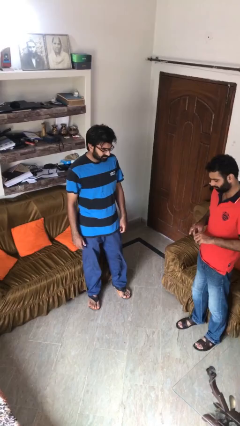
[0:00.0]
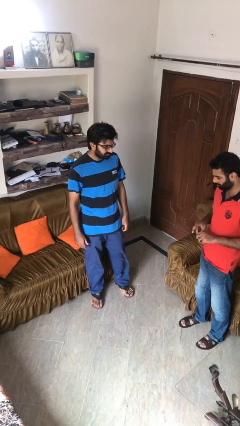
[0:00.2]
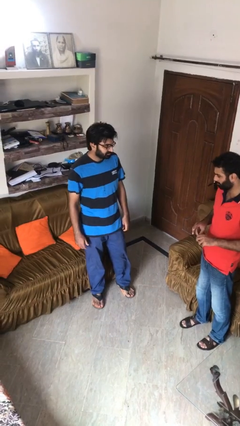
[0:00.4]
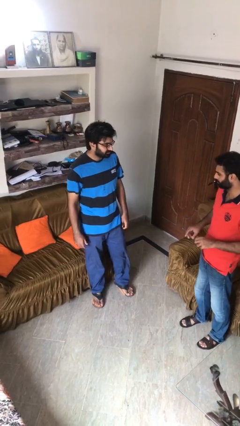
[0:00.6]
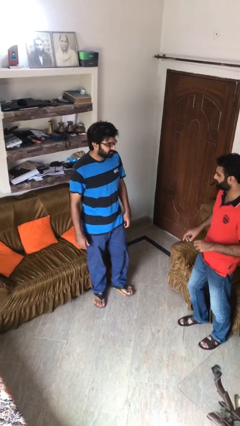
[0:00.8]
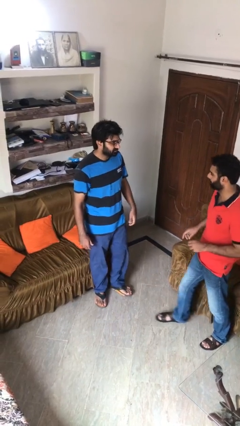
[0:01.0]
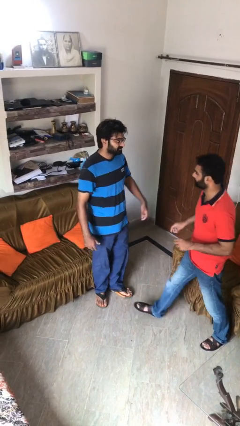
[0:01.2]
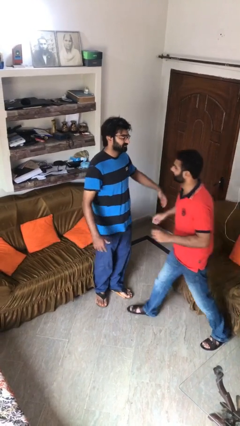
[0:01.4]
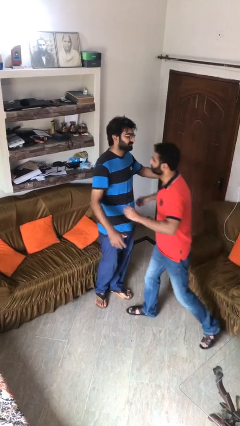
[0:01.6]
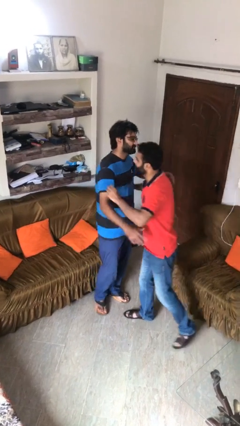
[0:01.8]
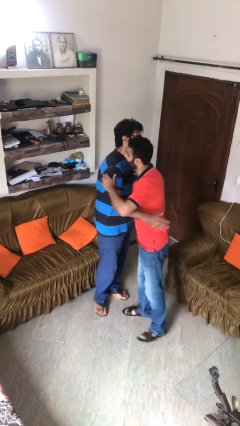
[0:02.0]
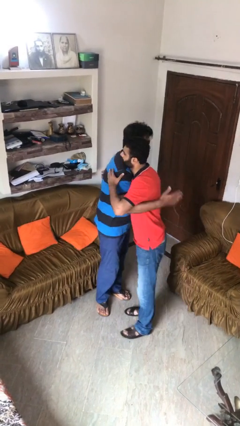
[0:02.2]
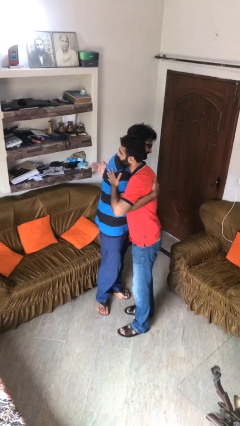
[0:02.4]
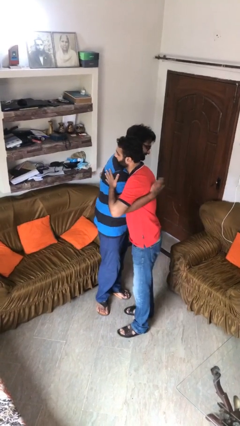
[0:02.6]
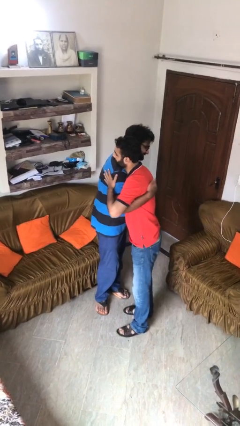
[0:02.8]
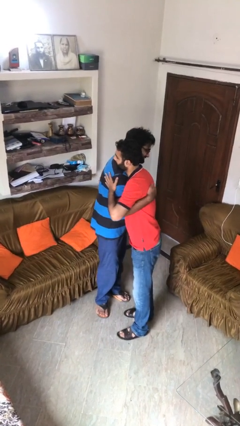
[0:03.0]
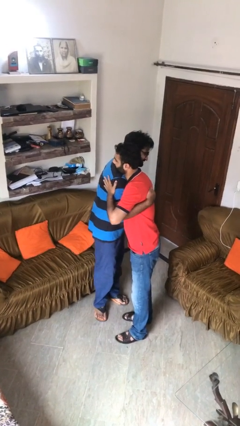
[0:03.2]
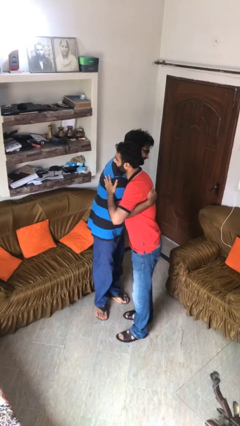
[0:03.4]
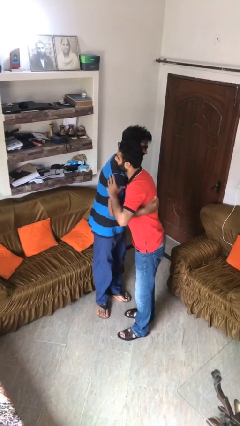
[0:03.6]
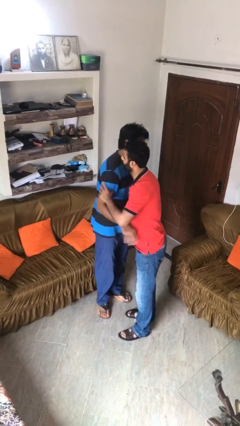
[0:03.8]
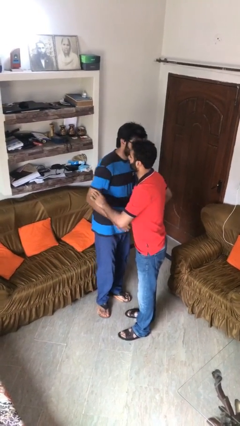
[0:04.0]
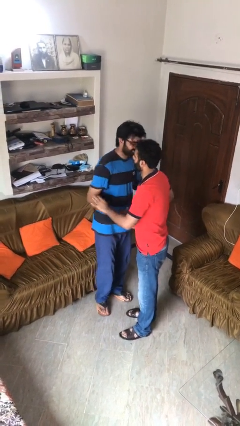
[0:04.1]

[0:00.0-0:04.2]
person embraces person

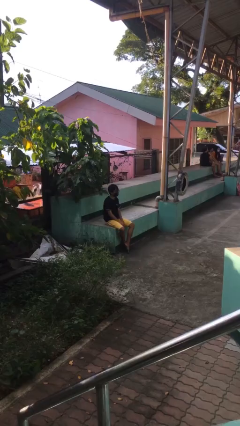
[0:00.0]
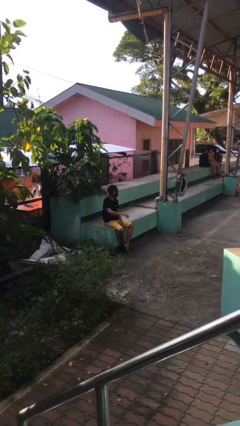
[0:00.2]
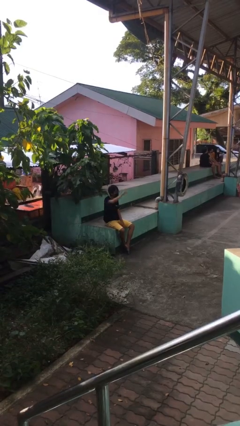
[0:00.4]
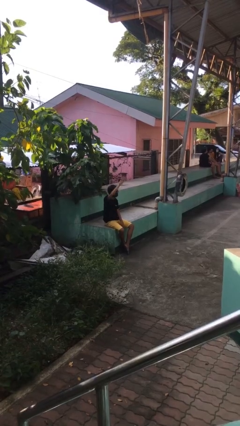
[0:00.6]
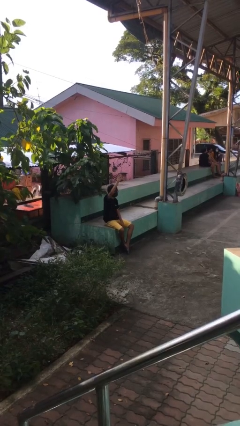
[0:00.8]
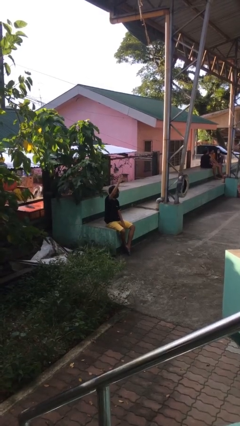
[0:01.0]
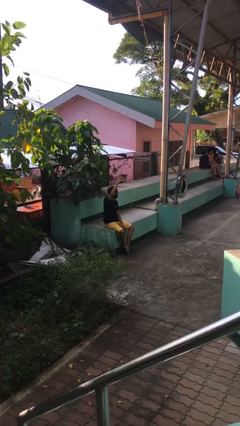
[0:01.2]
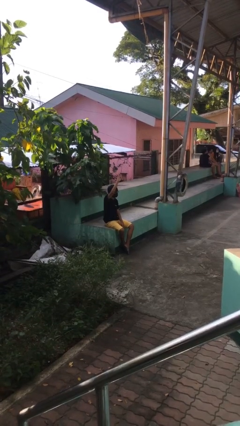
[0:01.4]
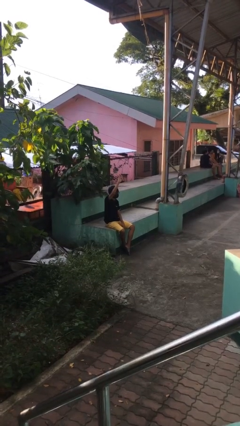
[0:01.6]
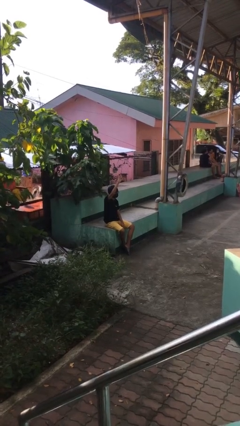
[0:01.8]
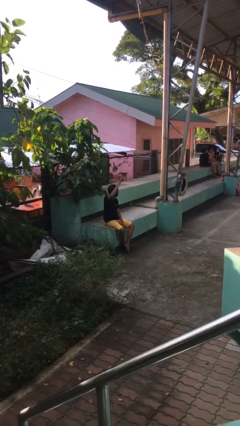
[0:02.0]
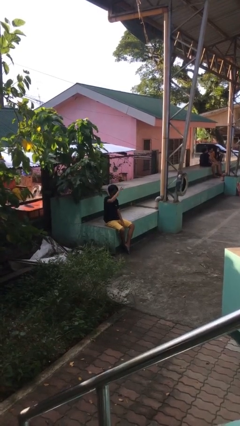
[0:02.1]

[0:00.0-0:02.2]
person gestures raise hand

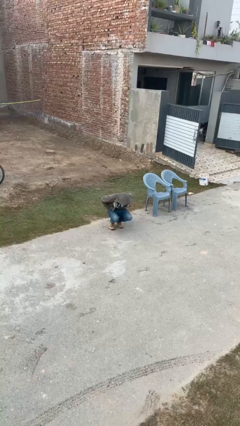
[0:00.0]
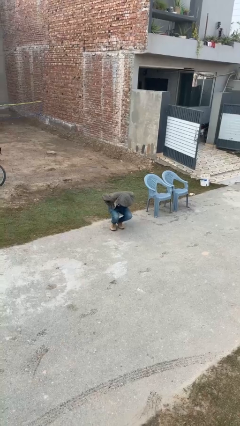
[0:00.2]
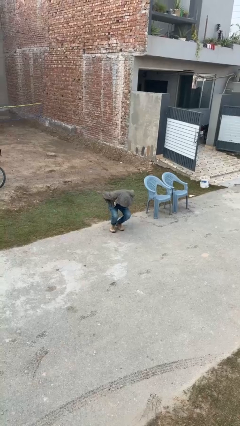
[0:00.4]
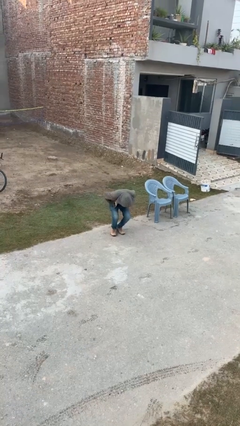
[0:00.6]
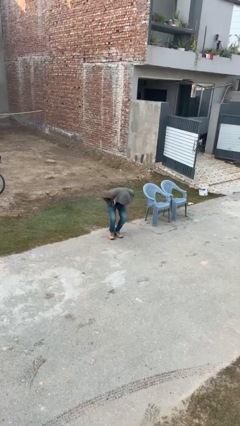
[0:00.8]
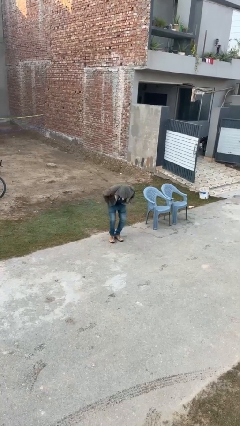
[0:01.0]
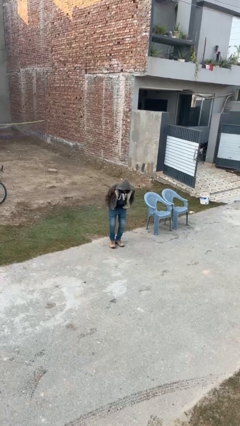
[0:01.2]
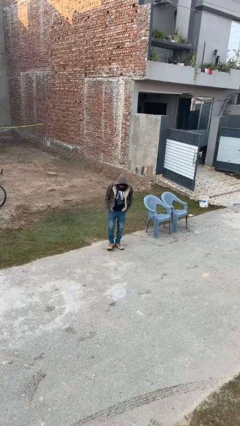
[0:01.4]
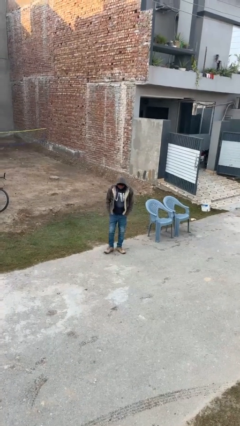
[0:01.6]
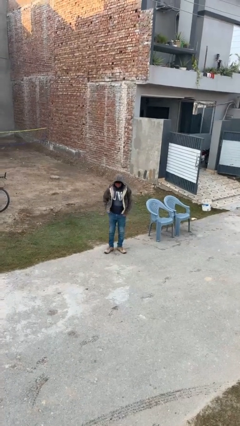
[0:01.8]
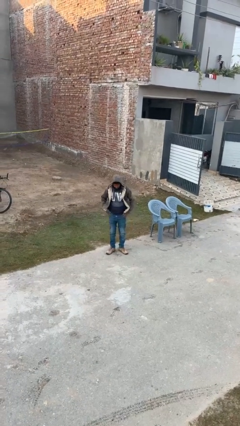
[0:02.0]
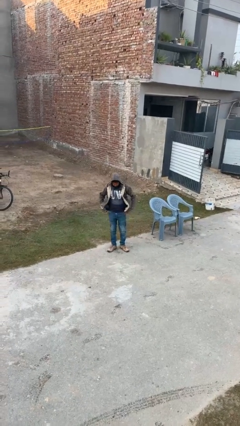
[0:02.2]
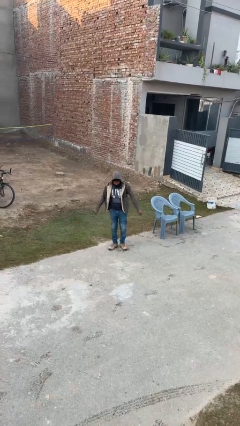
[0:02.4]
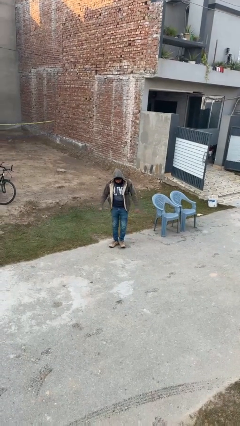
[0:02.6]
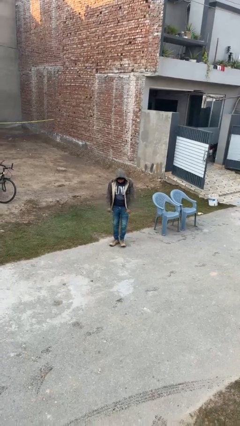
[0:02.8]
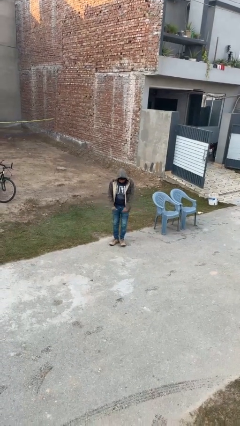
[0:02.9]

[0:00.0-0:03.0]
person stands up

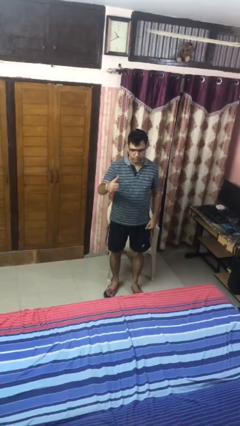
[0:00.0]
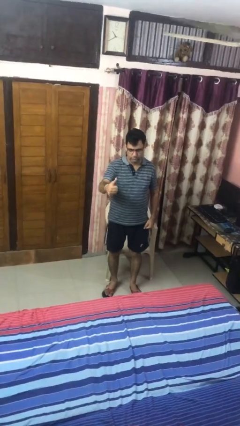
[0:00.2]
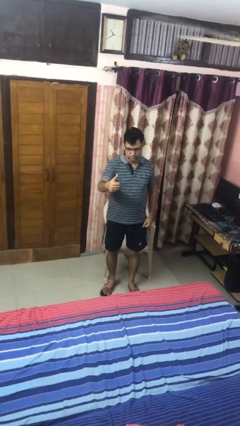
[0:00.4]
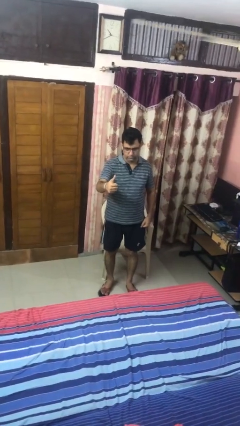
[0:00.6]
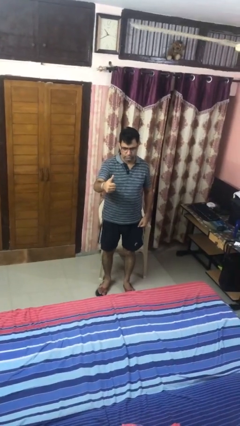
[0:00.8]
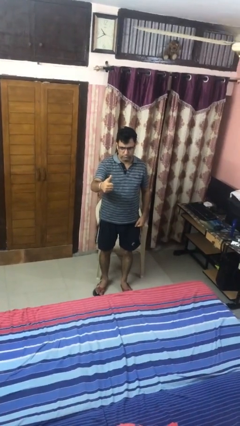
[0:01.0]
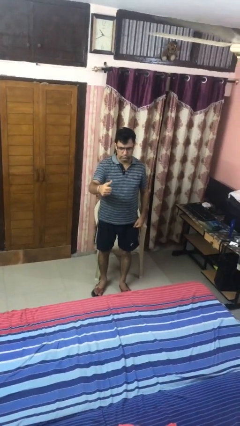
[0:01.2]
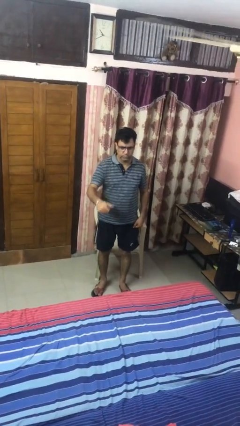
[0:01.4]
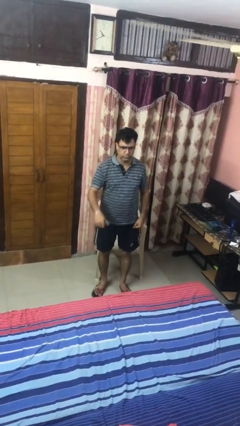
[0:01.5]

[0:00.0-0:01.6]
person gestures thumbs up

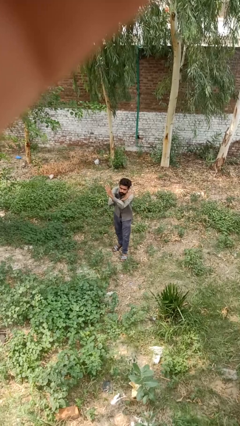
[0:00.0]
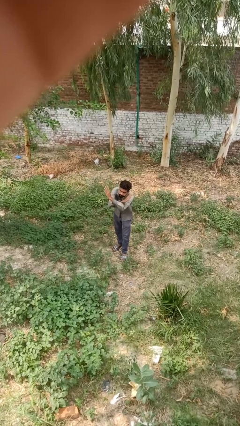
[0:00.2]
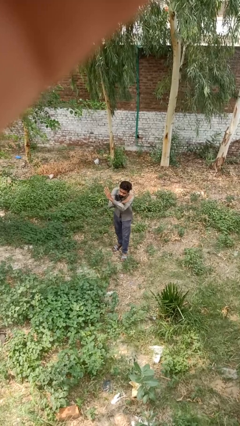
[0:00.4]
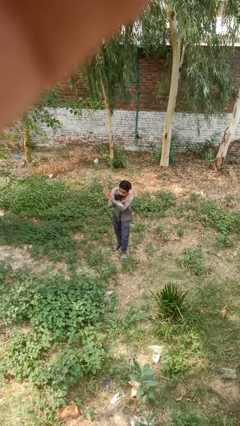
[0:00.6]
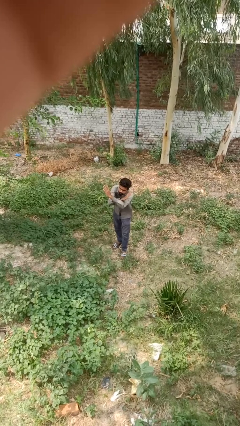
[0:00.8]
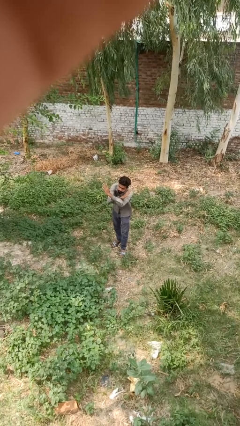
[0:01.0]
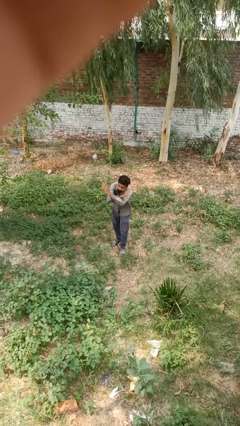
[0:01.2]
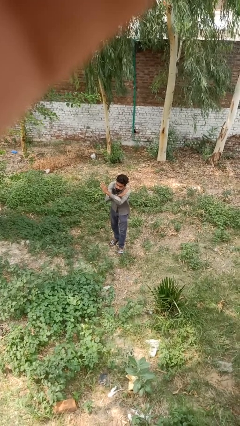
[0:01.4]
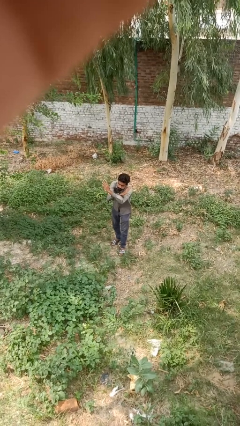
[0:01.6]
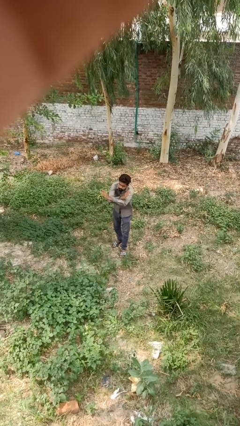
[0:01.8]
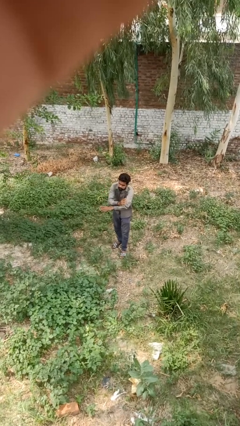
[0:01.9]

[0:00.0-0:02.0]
person crosses arms

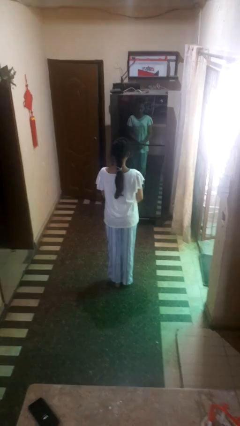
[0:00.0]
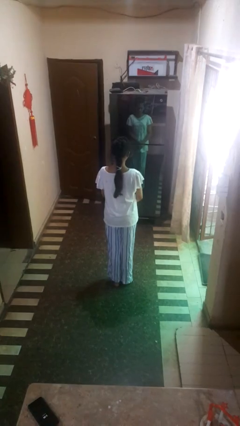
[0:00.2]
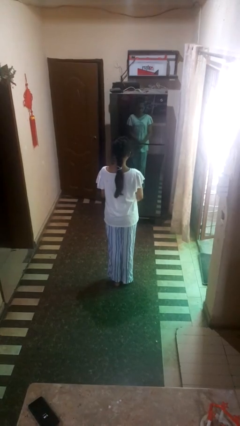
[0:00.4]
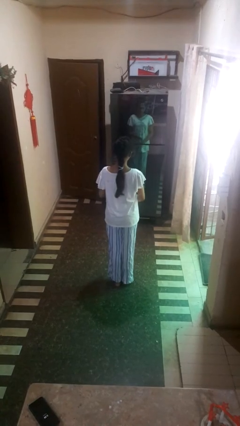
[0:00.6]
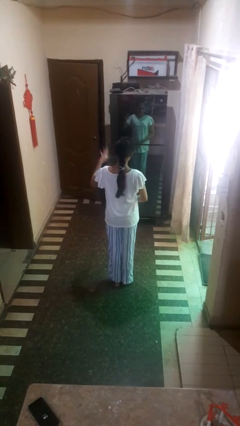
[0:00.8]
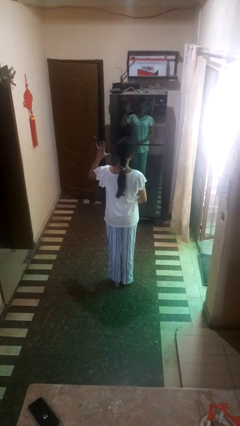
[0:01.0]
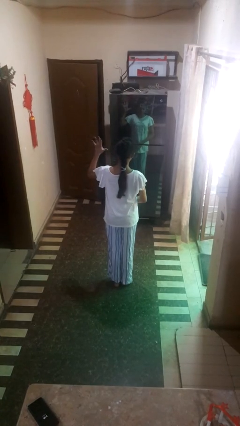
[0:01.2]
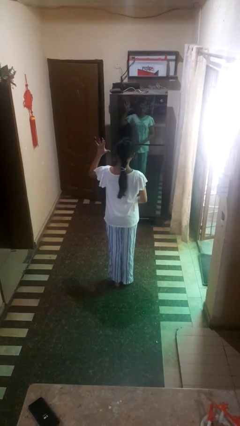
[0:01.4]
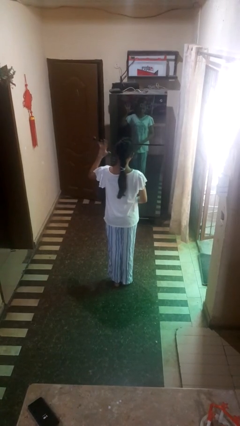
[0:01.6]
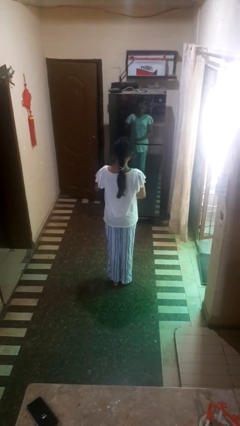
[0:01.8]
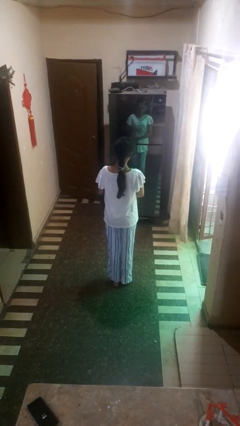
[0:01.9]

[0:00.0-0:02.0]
person gestures number five

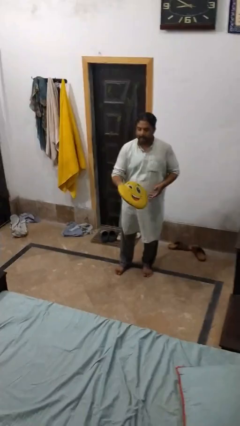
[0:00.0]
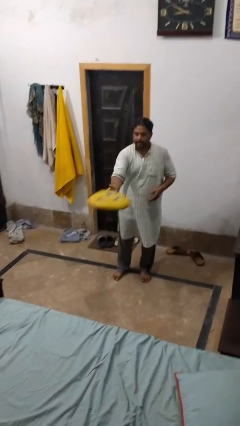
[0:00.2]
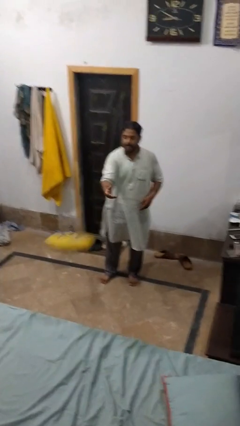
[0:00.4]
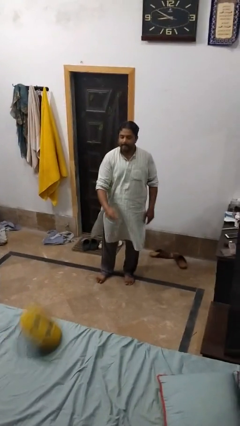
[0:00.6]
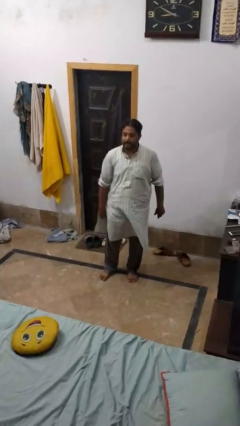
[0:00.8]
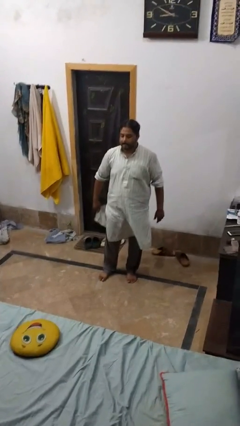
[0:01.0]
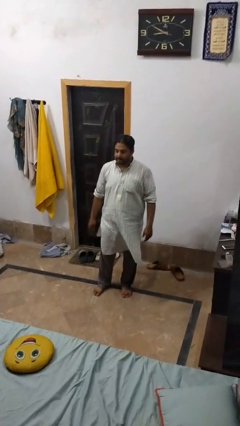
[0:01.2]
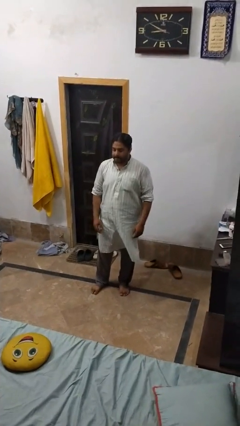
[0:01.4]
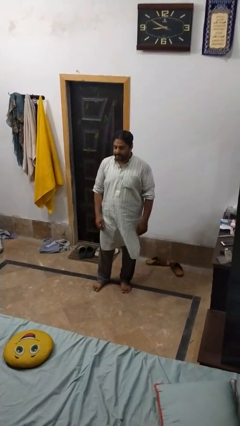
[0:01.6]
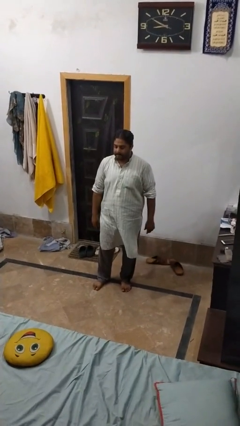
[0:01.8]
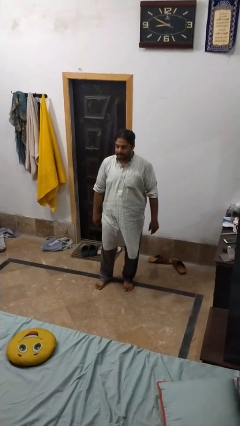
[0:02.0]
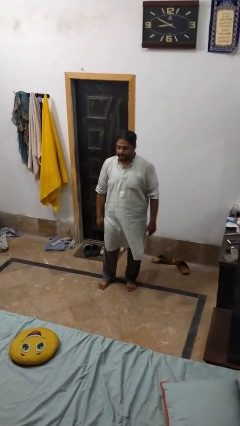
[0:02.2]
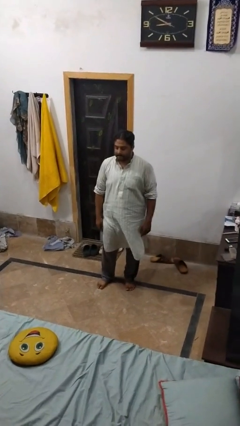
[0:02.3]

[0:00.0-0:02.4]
person throws object on bed
